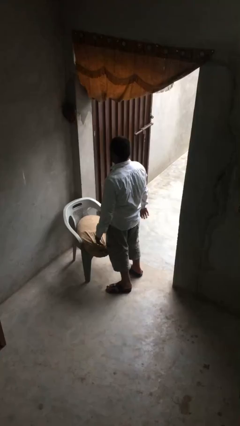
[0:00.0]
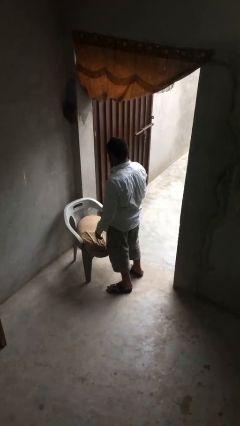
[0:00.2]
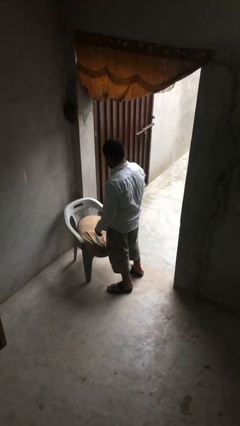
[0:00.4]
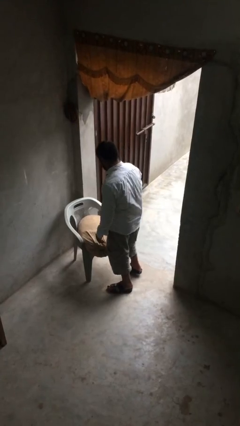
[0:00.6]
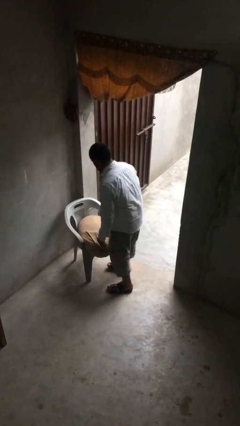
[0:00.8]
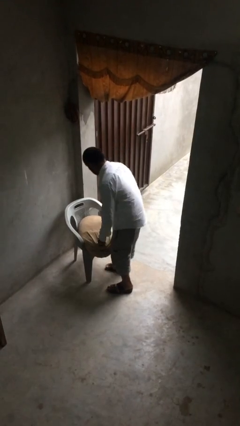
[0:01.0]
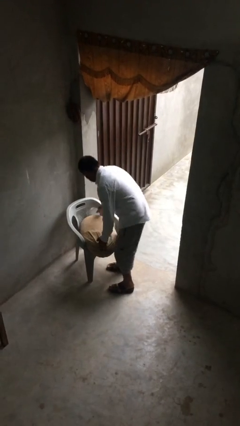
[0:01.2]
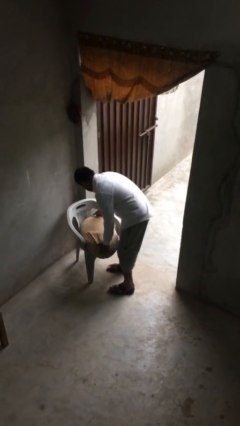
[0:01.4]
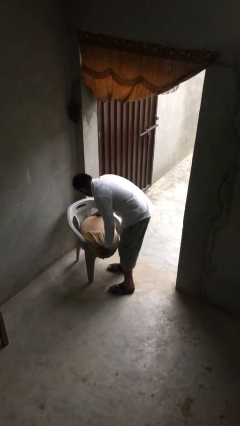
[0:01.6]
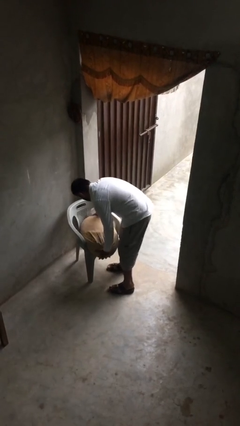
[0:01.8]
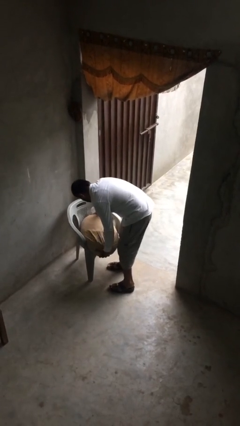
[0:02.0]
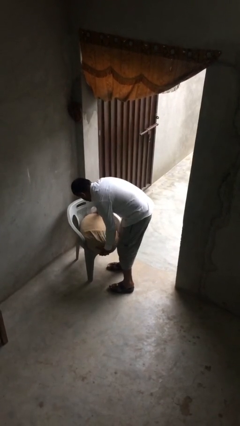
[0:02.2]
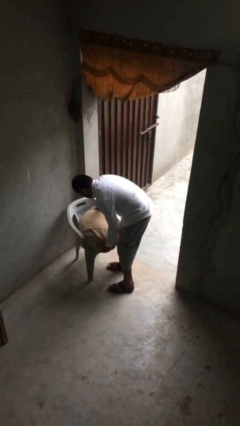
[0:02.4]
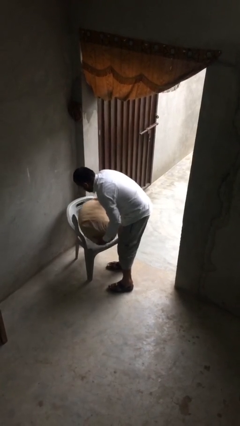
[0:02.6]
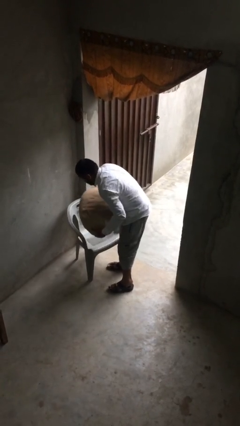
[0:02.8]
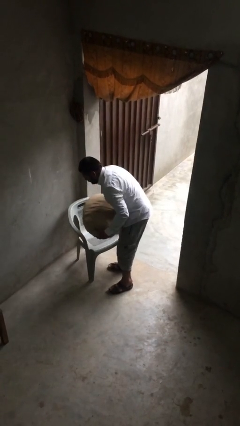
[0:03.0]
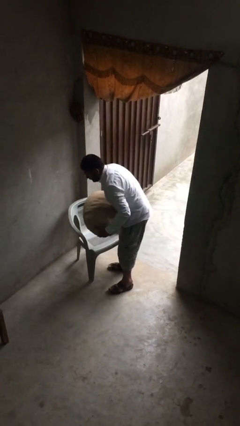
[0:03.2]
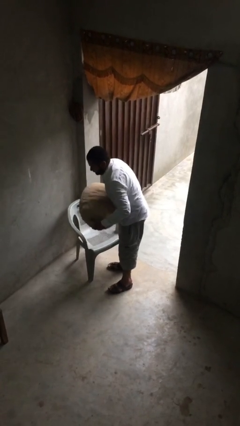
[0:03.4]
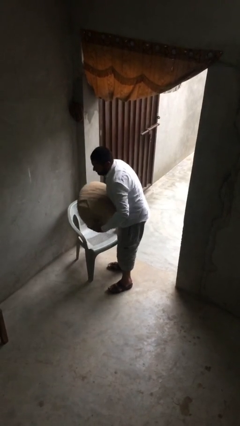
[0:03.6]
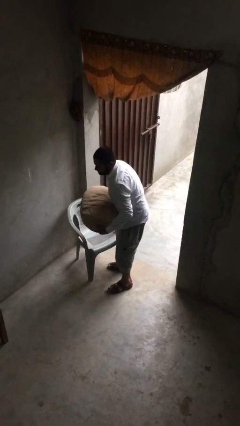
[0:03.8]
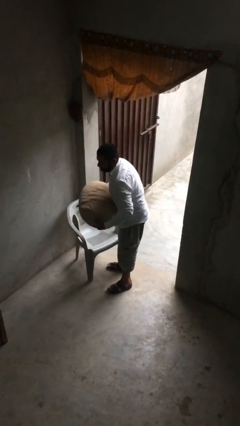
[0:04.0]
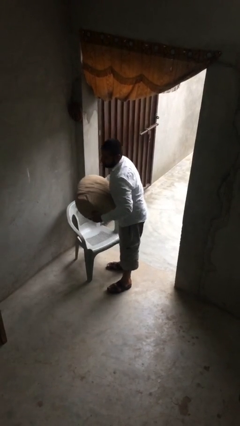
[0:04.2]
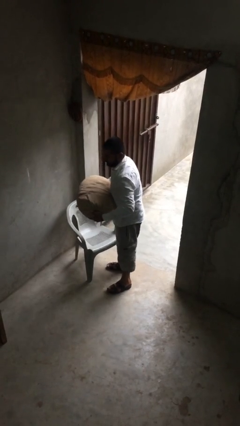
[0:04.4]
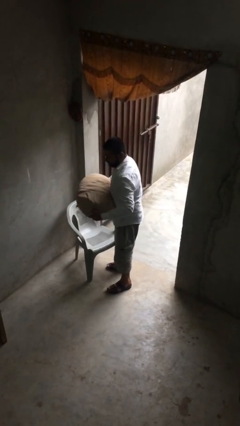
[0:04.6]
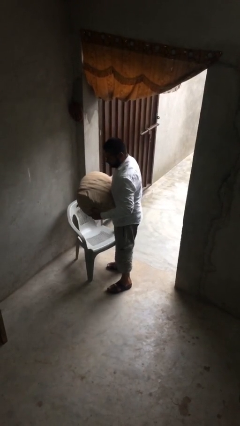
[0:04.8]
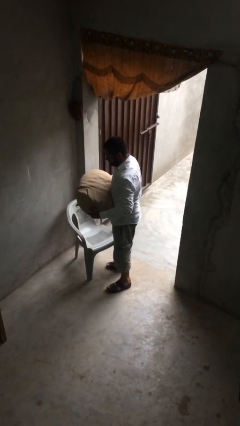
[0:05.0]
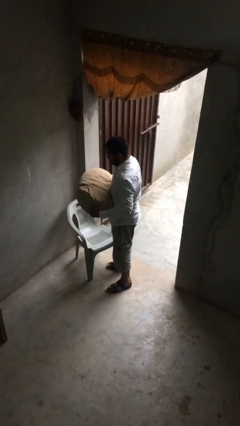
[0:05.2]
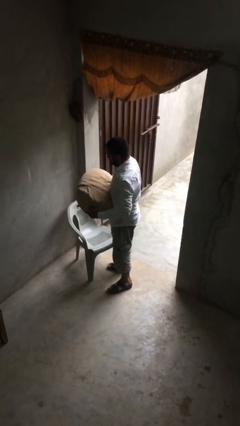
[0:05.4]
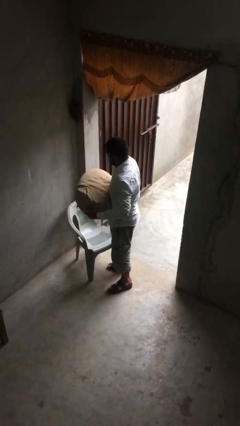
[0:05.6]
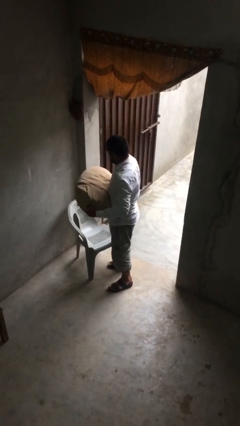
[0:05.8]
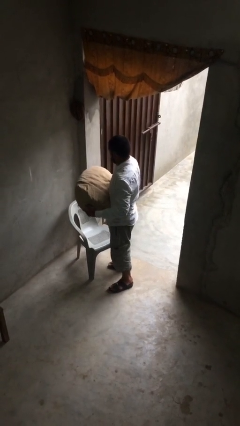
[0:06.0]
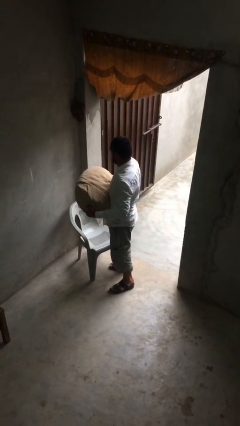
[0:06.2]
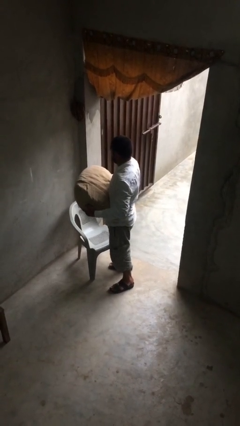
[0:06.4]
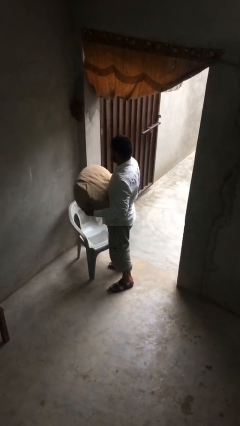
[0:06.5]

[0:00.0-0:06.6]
person carries heavy object

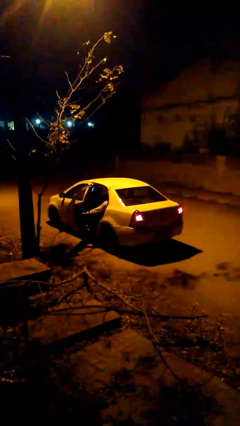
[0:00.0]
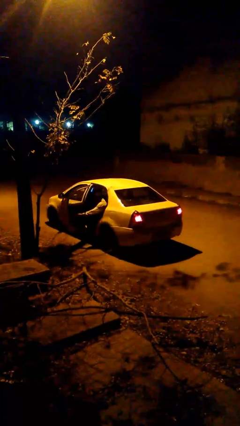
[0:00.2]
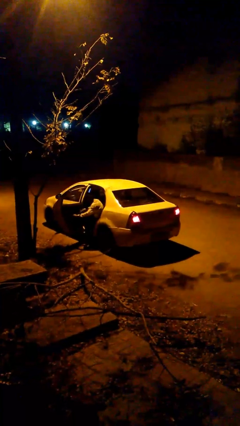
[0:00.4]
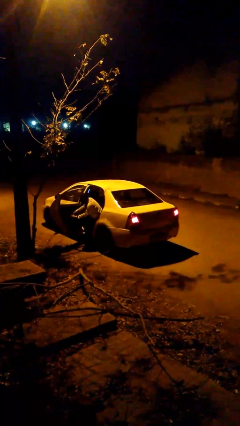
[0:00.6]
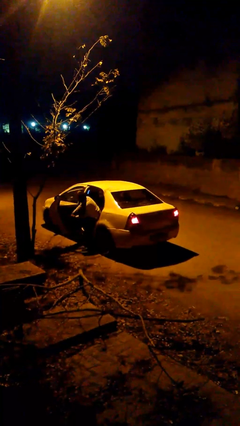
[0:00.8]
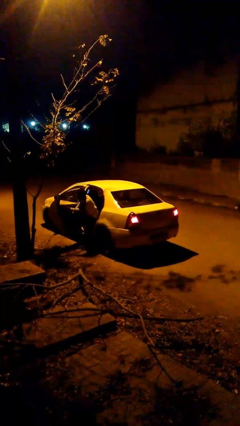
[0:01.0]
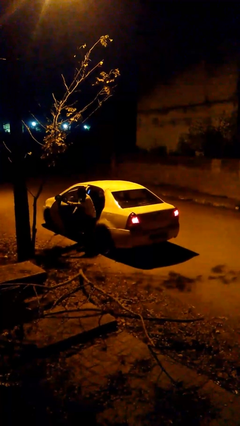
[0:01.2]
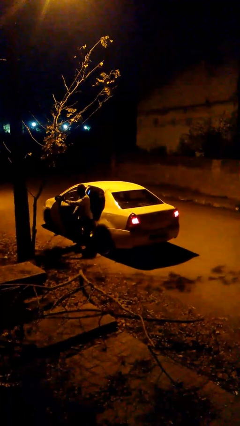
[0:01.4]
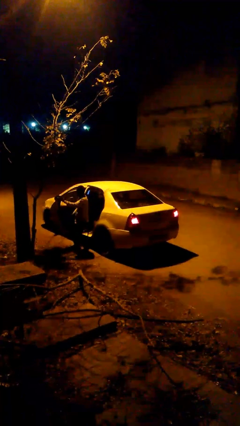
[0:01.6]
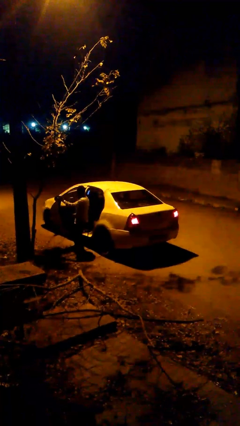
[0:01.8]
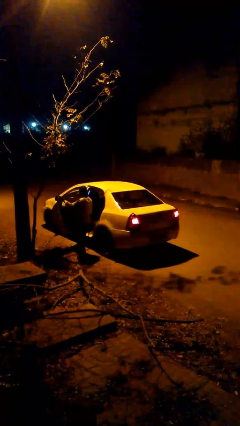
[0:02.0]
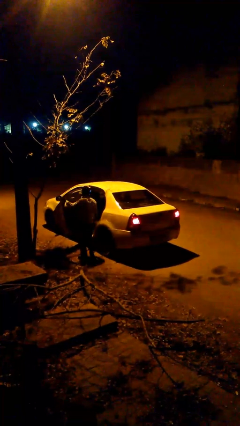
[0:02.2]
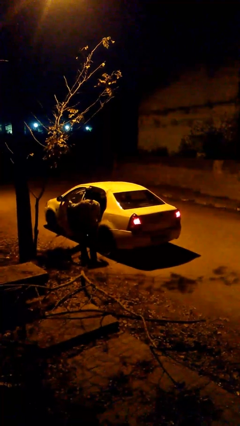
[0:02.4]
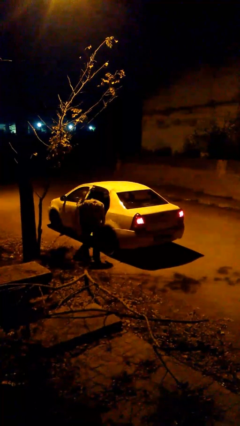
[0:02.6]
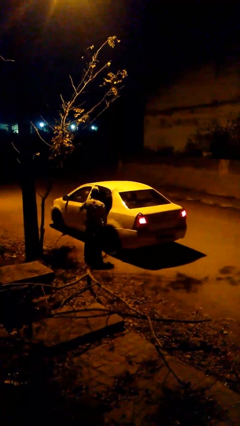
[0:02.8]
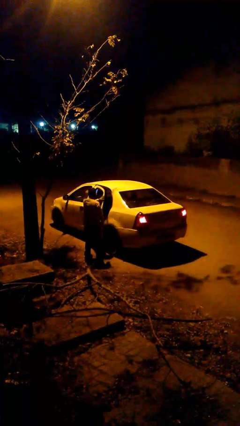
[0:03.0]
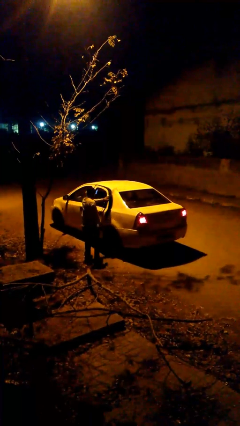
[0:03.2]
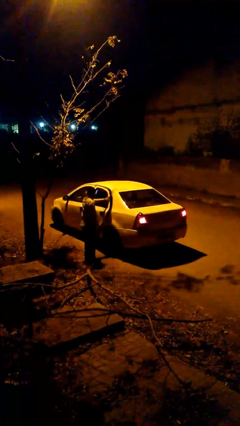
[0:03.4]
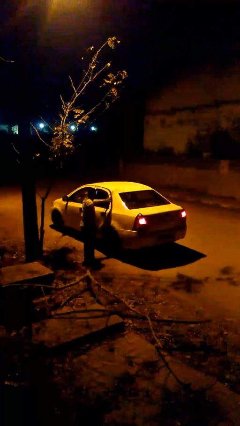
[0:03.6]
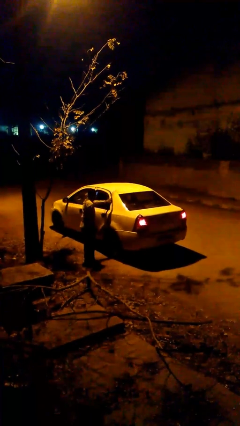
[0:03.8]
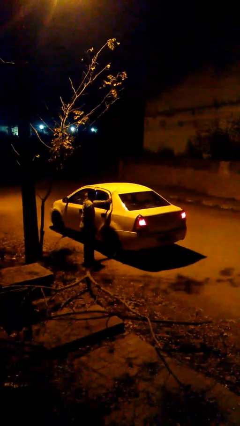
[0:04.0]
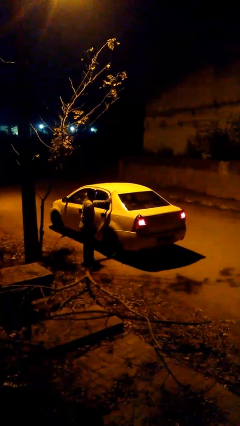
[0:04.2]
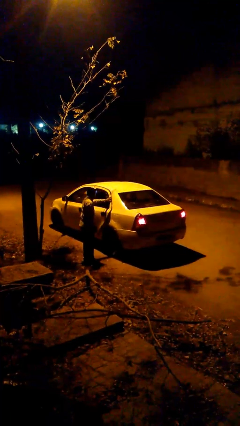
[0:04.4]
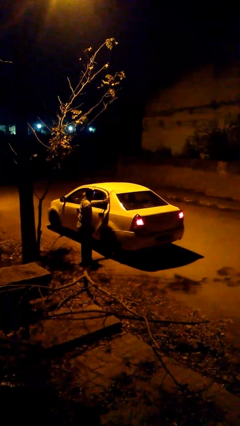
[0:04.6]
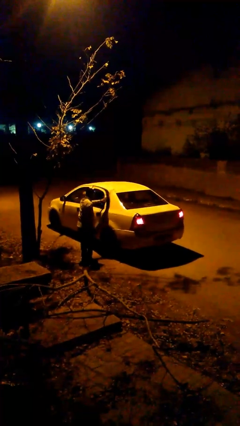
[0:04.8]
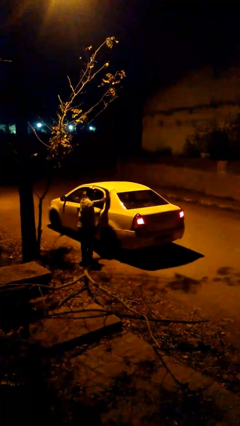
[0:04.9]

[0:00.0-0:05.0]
car drops off person

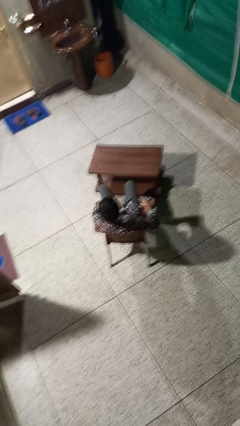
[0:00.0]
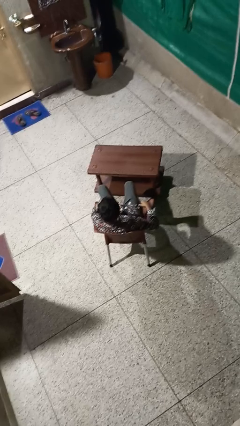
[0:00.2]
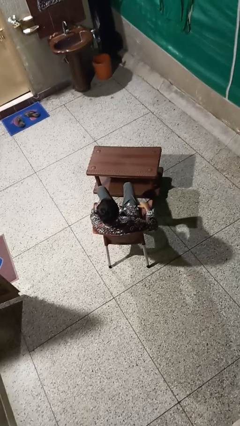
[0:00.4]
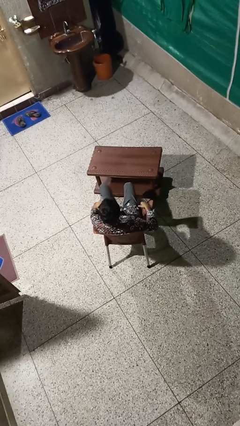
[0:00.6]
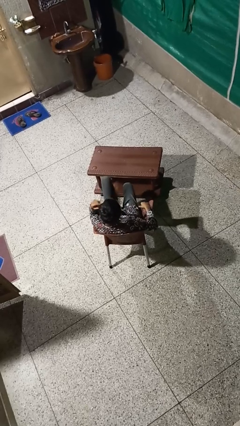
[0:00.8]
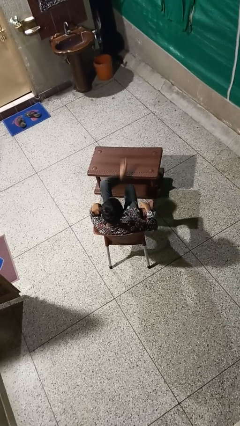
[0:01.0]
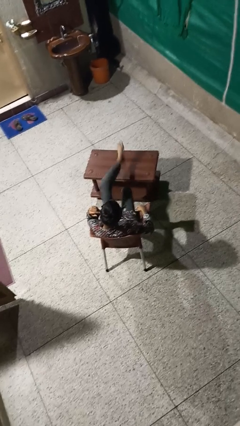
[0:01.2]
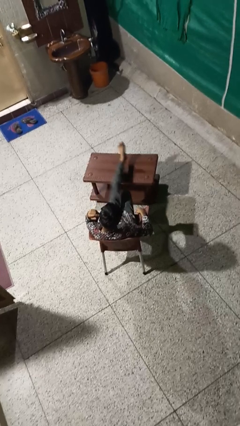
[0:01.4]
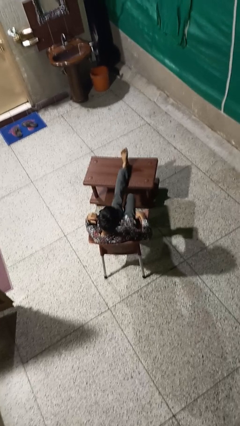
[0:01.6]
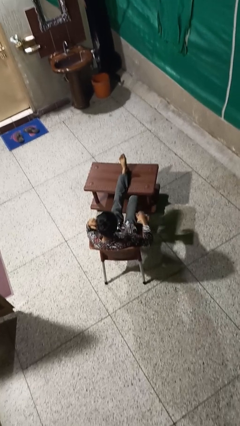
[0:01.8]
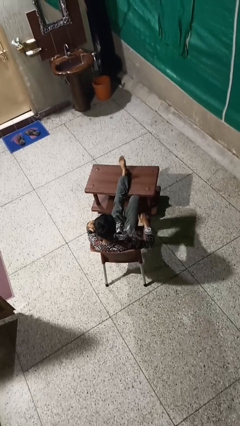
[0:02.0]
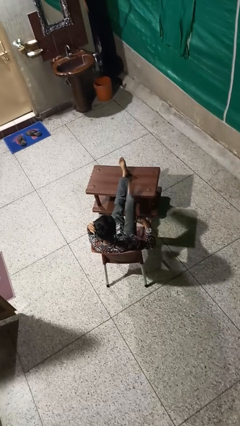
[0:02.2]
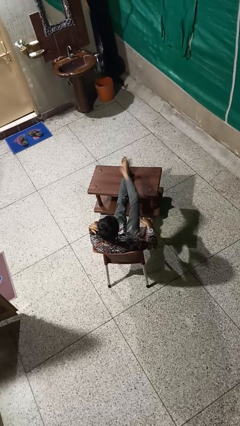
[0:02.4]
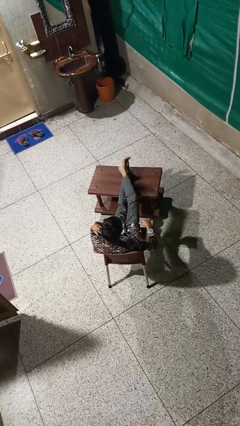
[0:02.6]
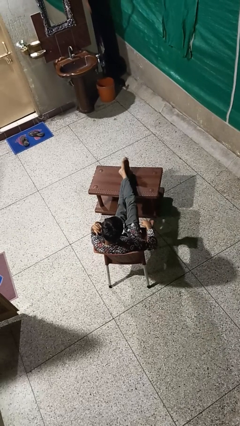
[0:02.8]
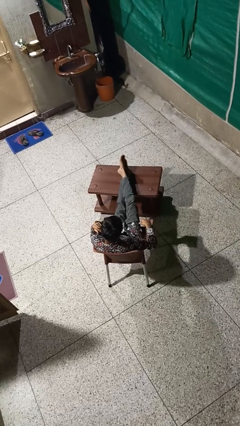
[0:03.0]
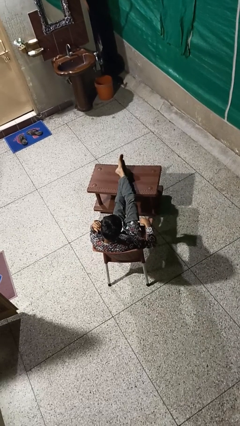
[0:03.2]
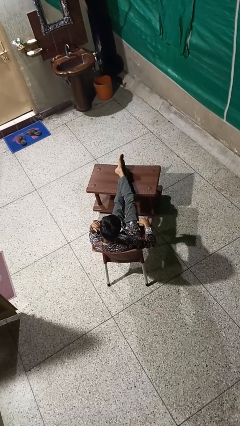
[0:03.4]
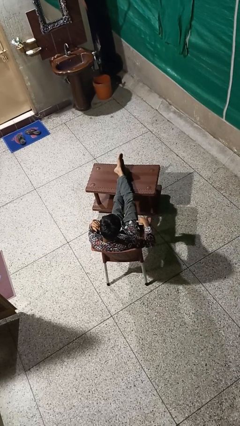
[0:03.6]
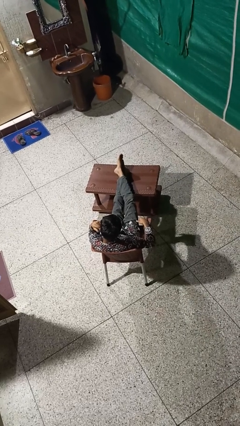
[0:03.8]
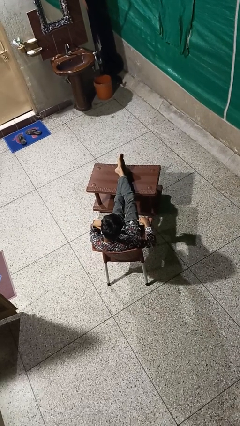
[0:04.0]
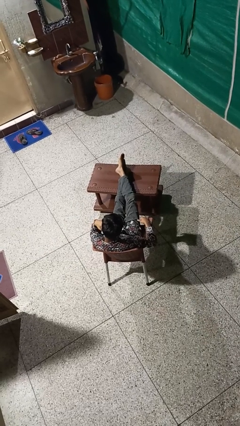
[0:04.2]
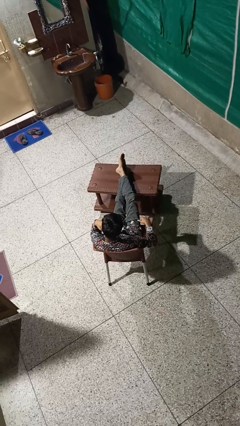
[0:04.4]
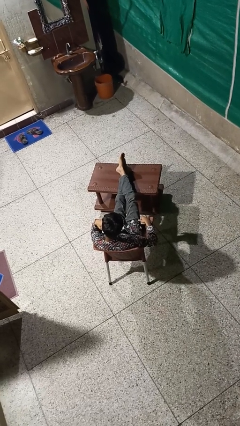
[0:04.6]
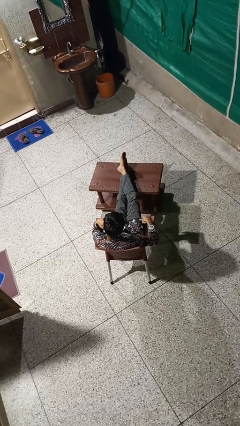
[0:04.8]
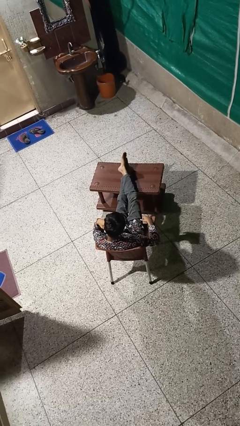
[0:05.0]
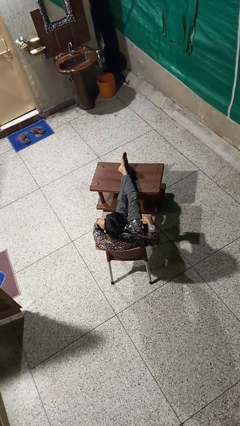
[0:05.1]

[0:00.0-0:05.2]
person puts feet up

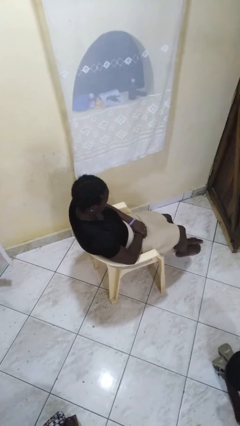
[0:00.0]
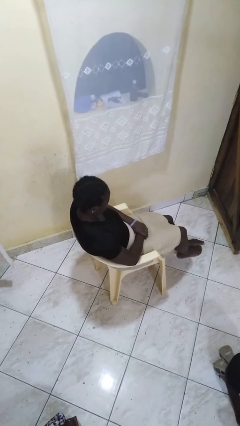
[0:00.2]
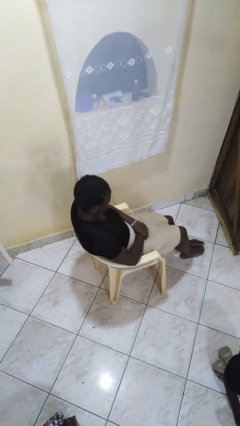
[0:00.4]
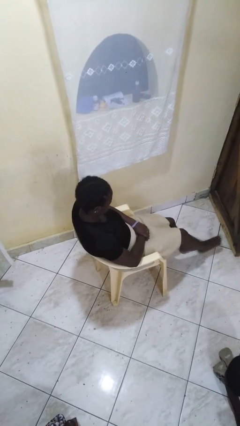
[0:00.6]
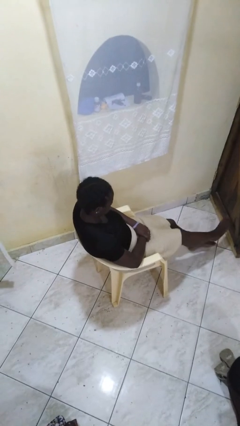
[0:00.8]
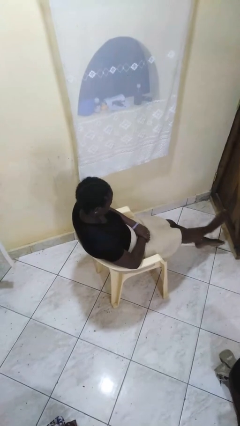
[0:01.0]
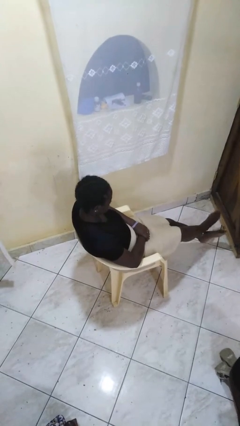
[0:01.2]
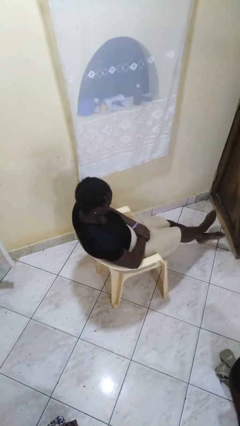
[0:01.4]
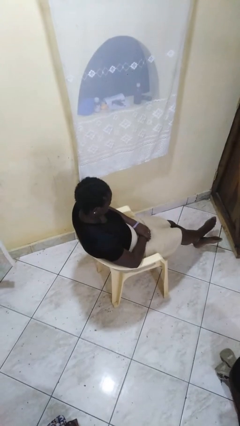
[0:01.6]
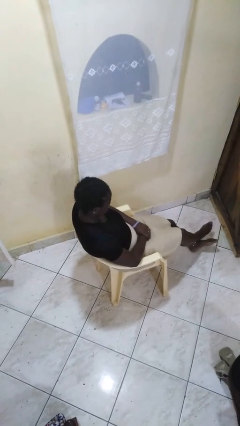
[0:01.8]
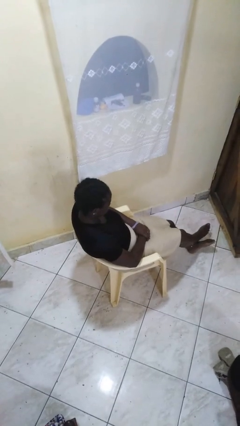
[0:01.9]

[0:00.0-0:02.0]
person crosses legs
